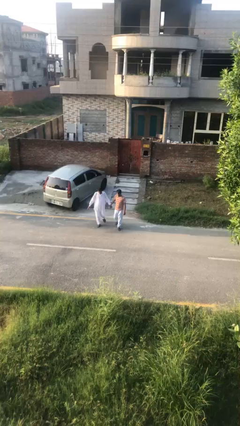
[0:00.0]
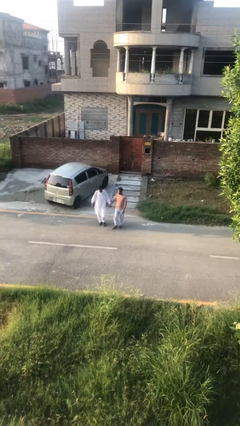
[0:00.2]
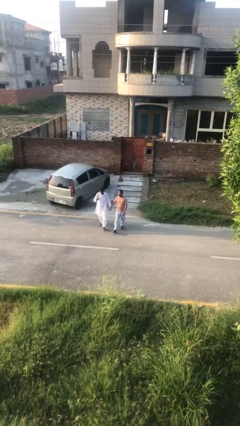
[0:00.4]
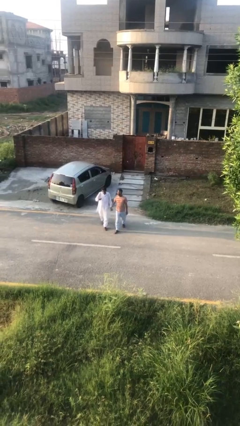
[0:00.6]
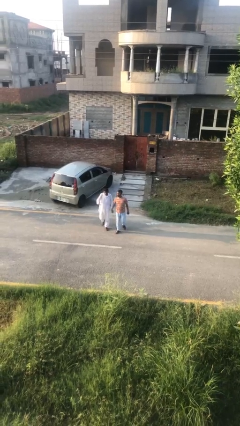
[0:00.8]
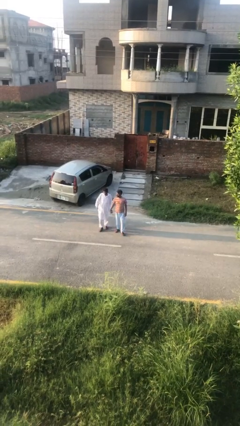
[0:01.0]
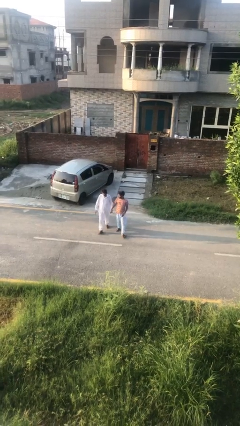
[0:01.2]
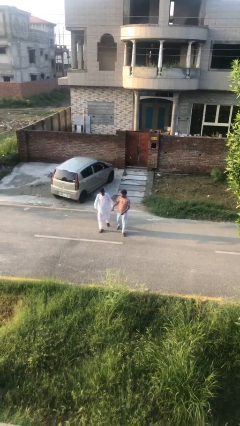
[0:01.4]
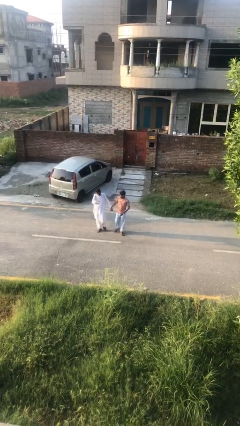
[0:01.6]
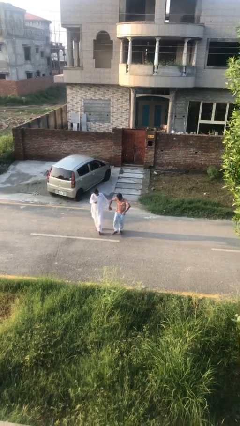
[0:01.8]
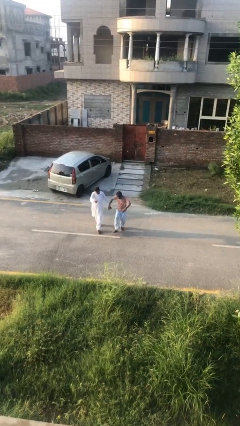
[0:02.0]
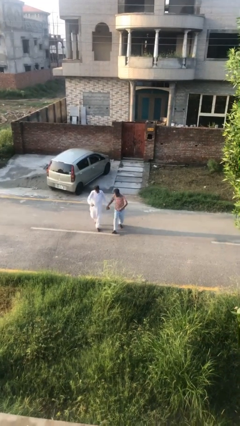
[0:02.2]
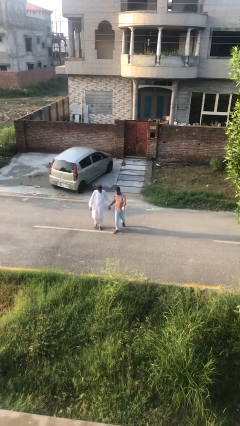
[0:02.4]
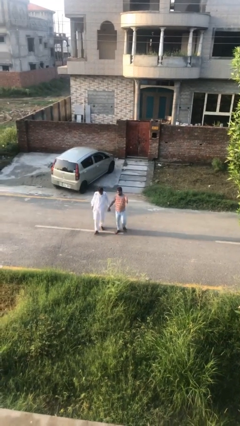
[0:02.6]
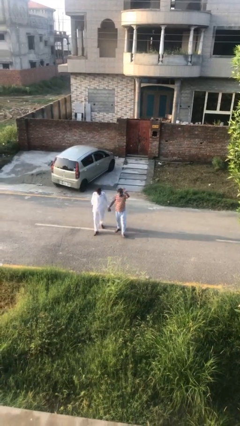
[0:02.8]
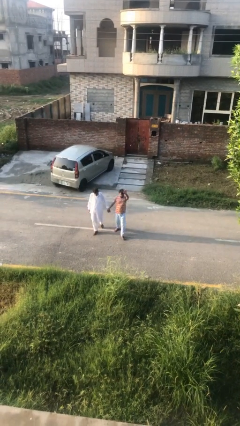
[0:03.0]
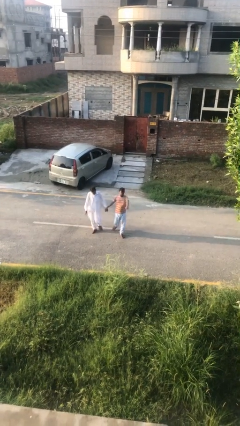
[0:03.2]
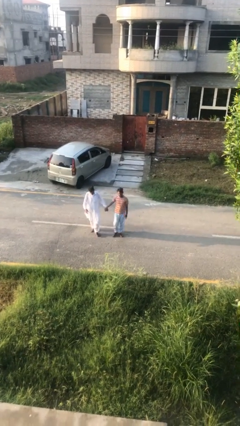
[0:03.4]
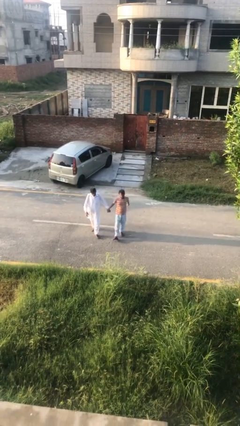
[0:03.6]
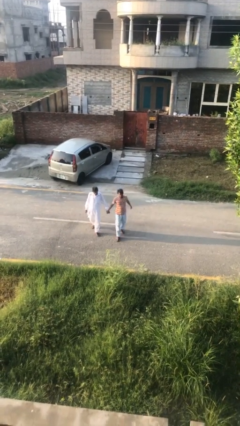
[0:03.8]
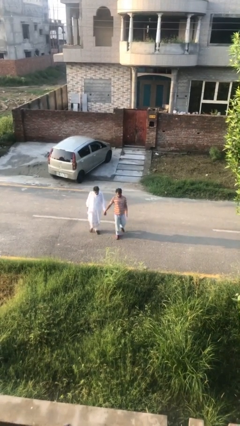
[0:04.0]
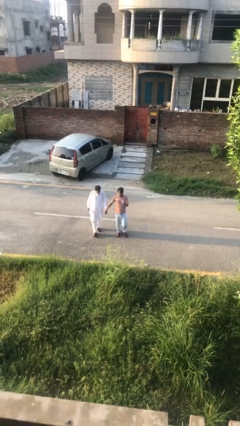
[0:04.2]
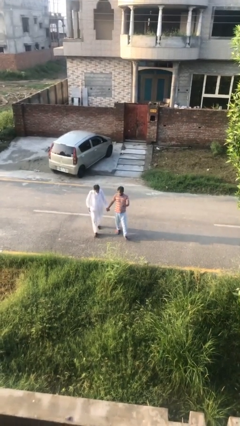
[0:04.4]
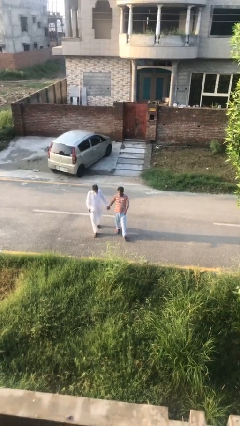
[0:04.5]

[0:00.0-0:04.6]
person holds hand

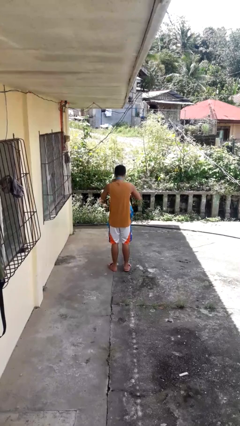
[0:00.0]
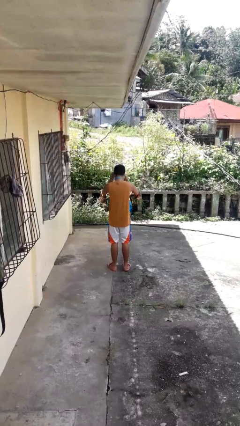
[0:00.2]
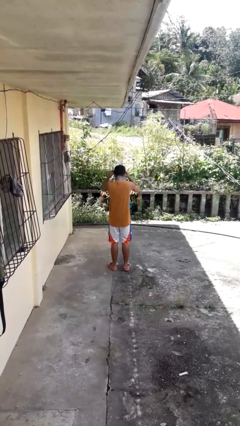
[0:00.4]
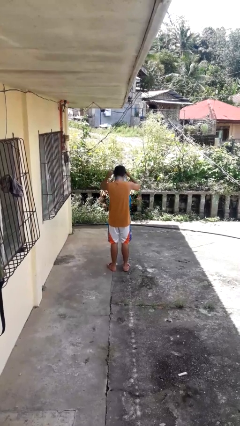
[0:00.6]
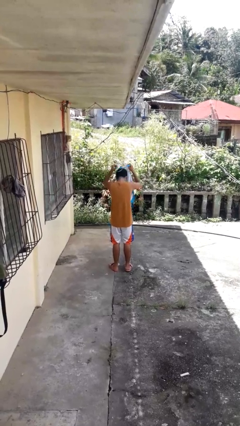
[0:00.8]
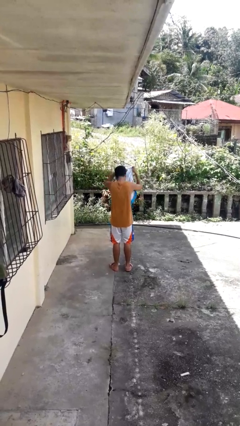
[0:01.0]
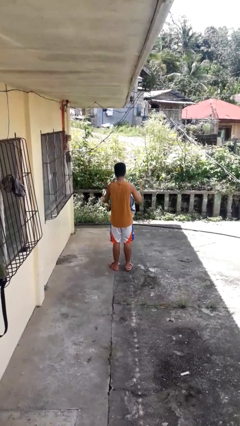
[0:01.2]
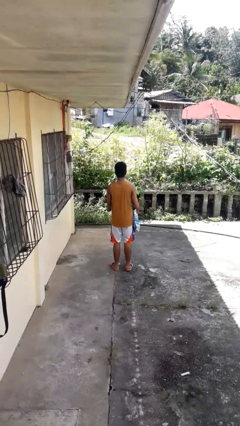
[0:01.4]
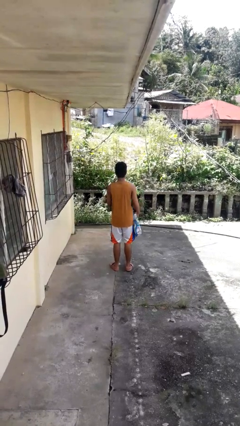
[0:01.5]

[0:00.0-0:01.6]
person takes off apron

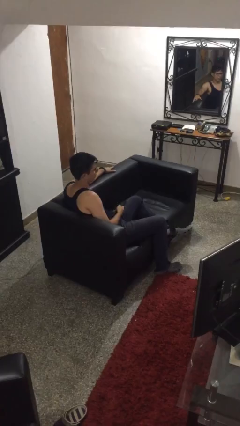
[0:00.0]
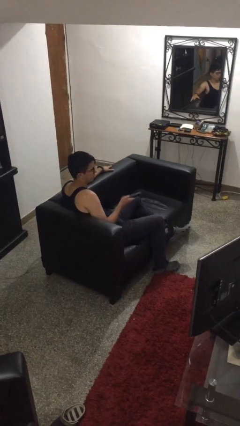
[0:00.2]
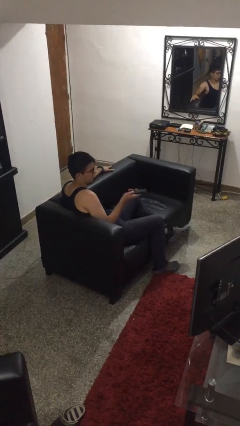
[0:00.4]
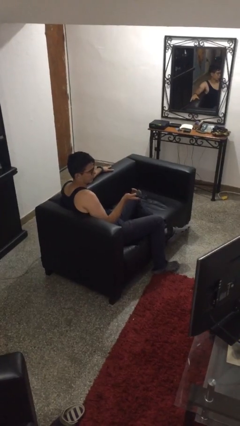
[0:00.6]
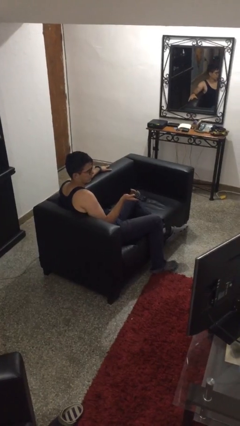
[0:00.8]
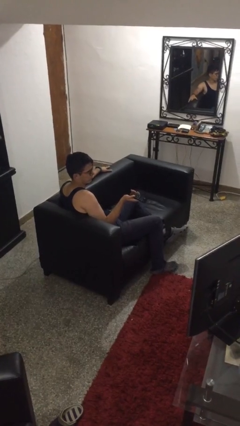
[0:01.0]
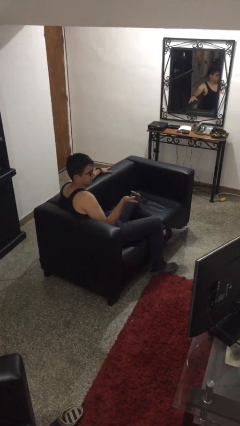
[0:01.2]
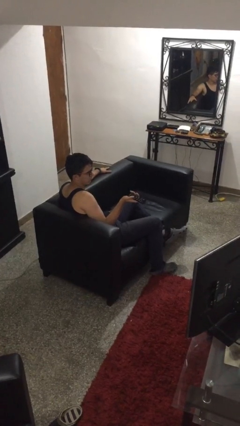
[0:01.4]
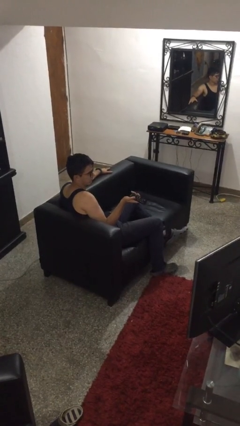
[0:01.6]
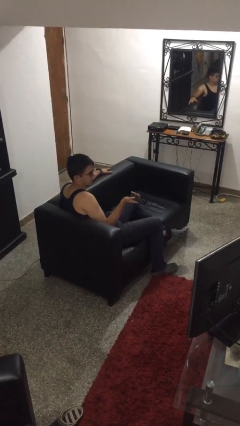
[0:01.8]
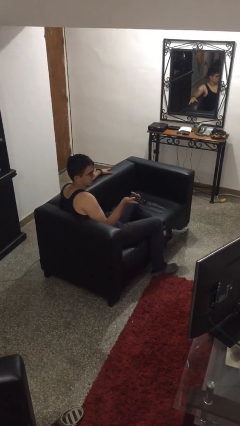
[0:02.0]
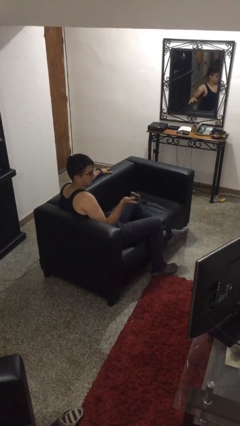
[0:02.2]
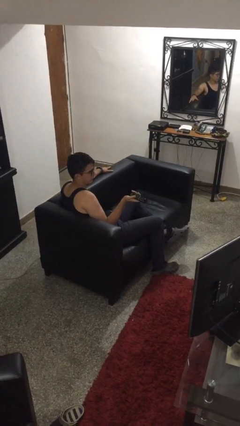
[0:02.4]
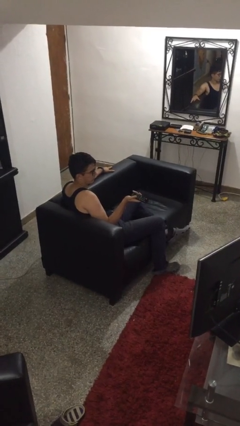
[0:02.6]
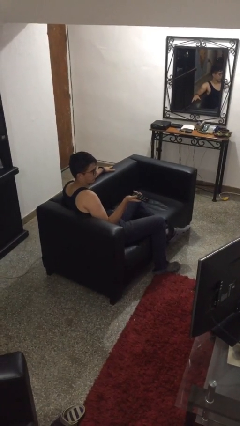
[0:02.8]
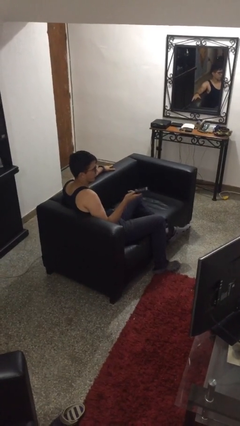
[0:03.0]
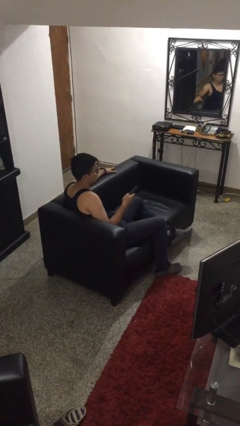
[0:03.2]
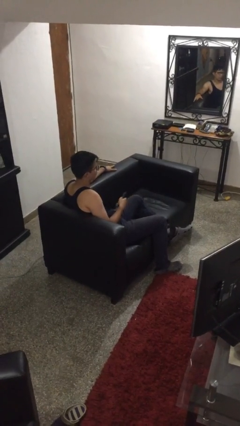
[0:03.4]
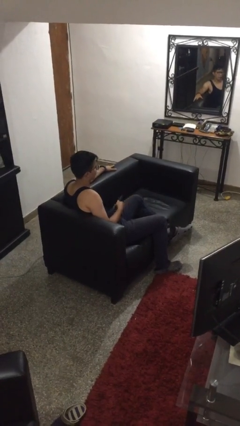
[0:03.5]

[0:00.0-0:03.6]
person uses television remote

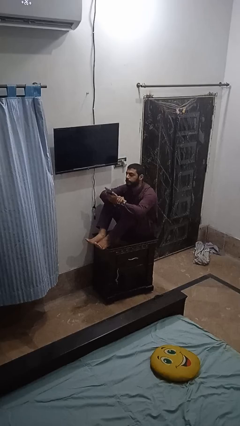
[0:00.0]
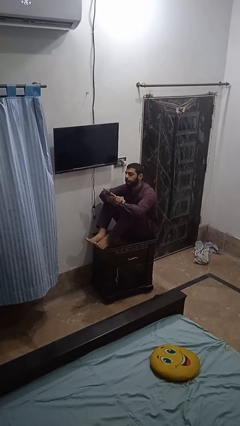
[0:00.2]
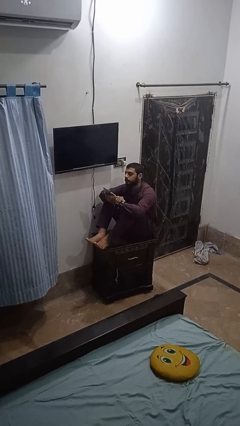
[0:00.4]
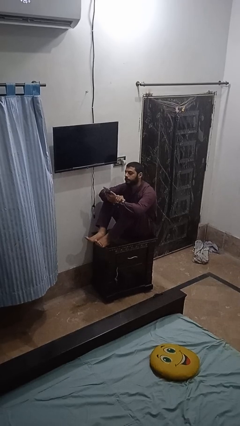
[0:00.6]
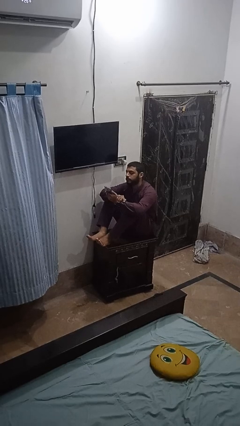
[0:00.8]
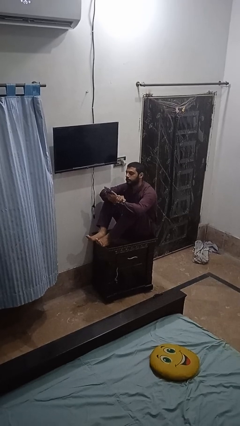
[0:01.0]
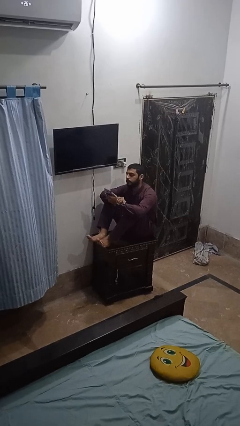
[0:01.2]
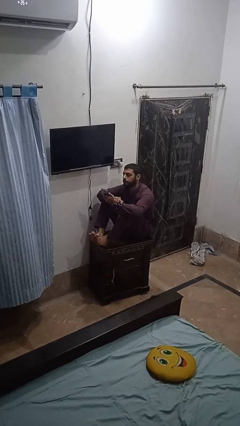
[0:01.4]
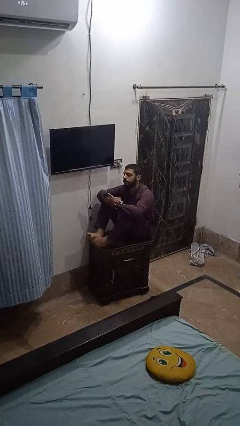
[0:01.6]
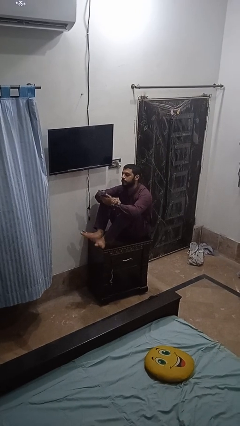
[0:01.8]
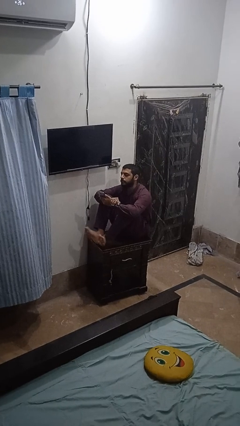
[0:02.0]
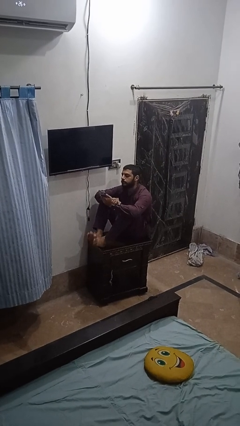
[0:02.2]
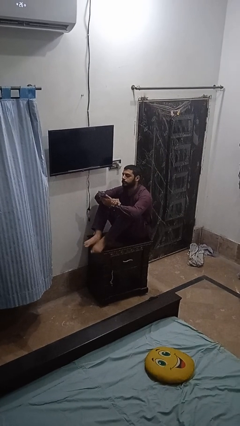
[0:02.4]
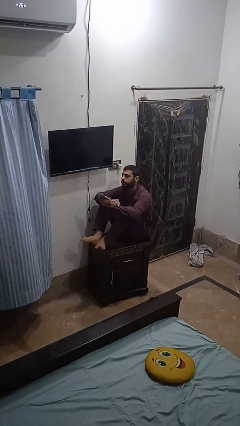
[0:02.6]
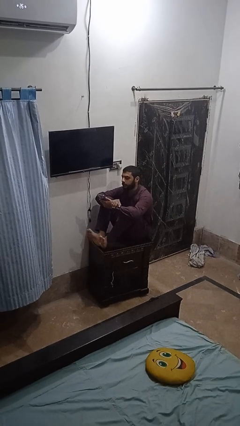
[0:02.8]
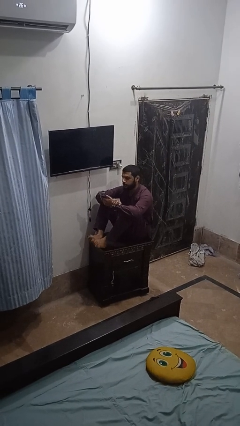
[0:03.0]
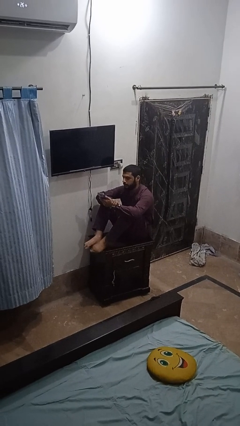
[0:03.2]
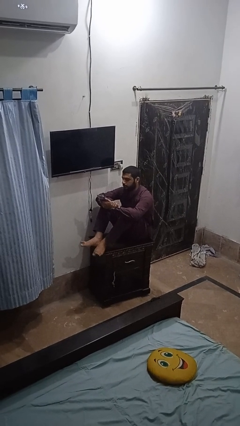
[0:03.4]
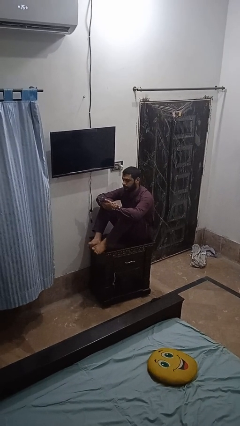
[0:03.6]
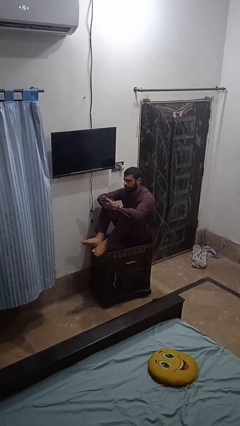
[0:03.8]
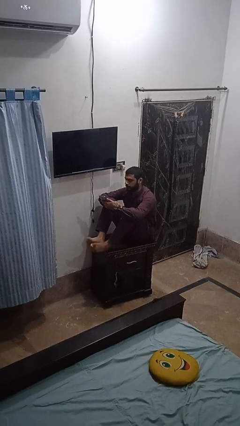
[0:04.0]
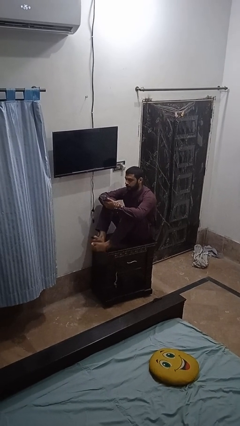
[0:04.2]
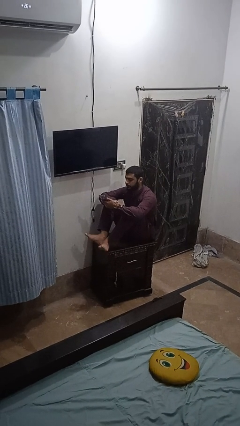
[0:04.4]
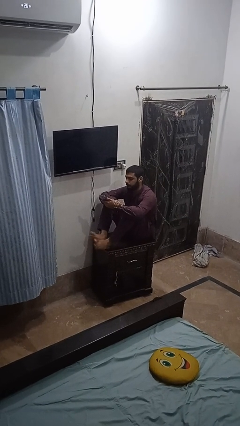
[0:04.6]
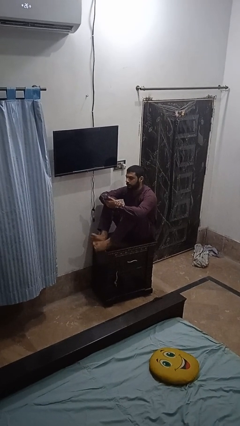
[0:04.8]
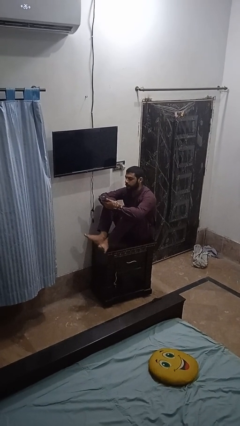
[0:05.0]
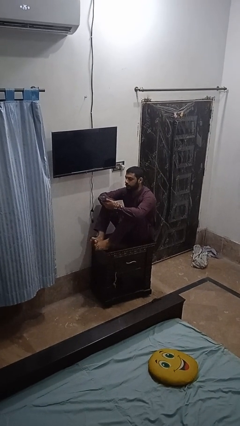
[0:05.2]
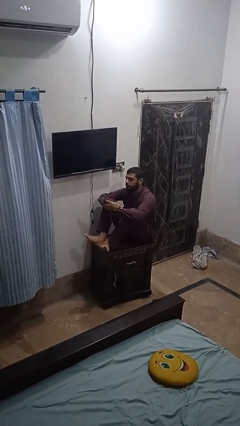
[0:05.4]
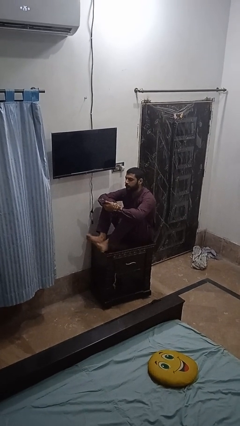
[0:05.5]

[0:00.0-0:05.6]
person twirls

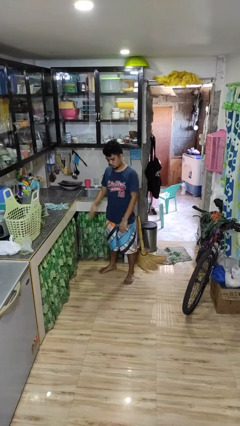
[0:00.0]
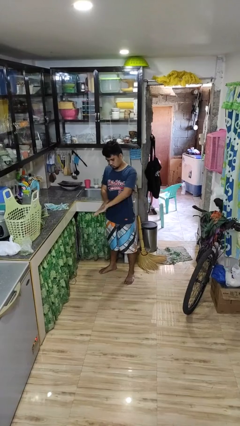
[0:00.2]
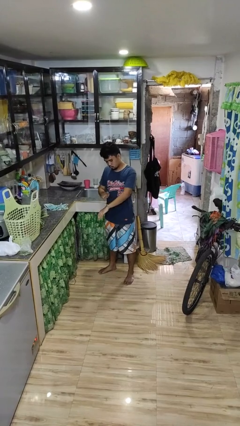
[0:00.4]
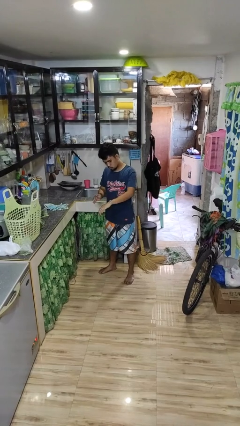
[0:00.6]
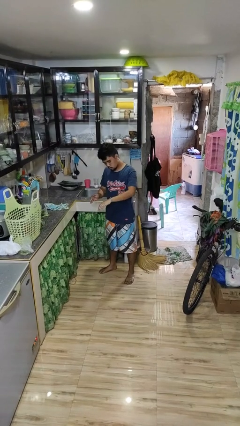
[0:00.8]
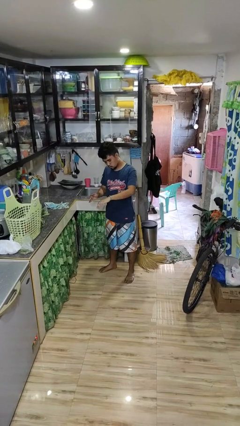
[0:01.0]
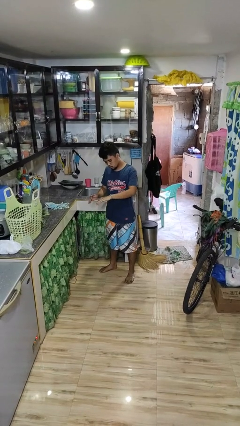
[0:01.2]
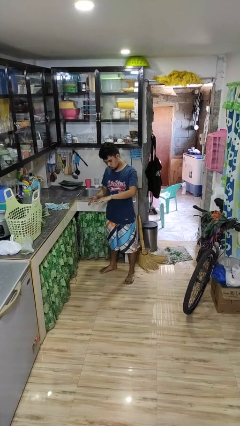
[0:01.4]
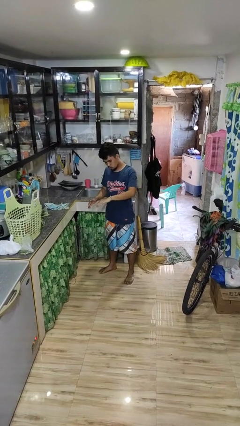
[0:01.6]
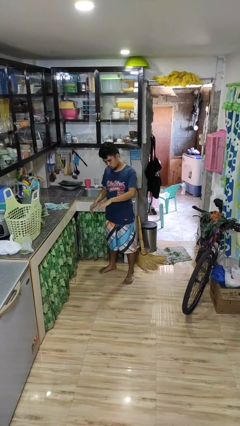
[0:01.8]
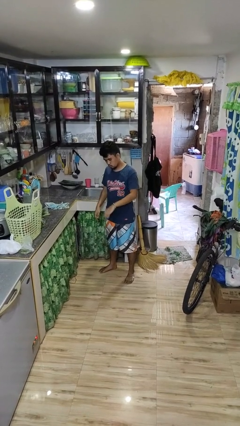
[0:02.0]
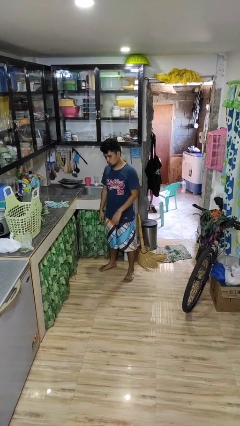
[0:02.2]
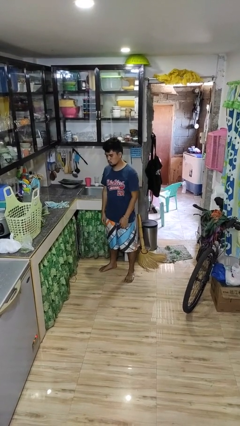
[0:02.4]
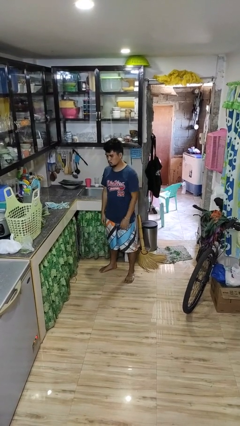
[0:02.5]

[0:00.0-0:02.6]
person swats bug
